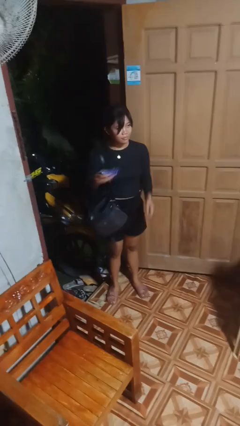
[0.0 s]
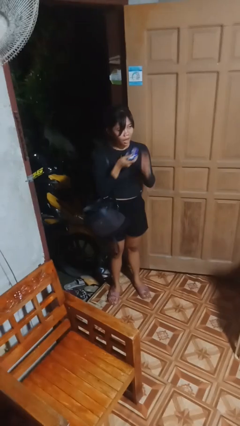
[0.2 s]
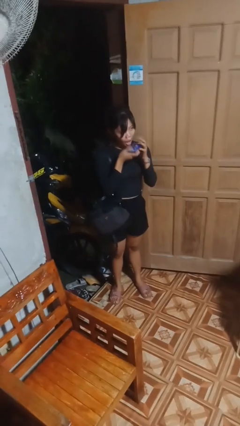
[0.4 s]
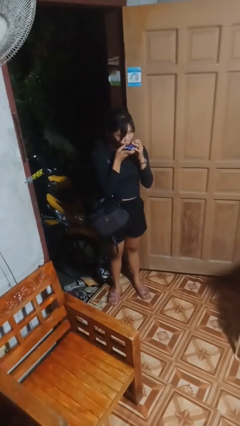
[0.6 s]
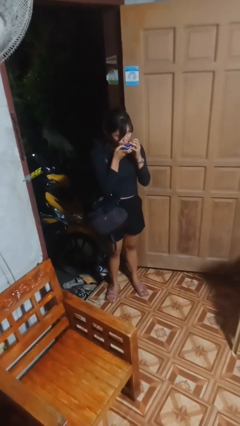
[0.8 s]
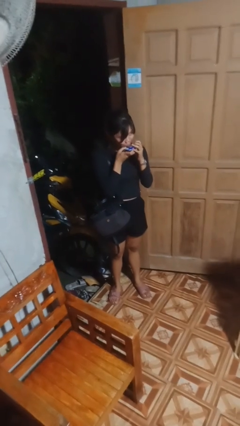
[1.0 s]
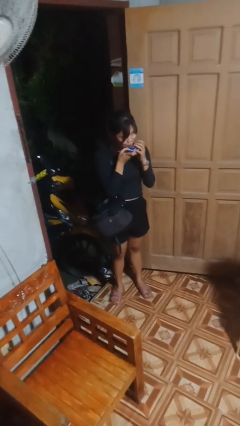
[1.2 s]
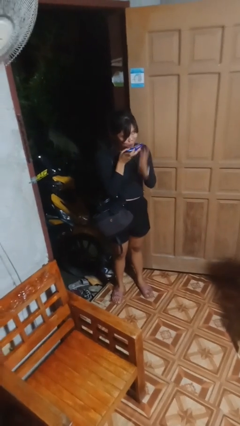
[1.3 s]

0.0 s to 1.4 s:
person eats snack from bag

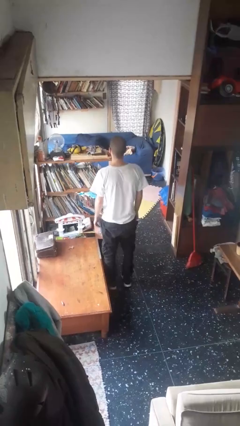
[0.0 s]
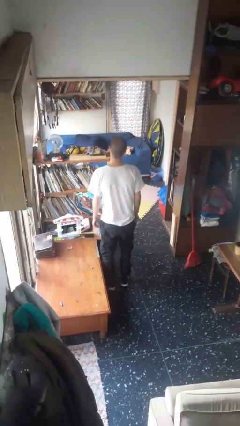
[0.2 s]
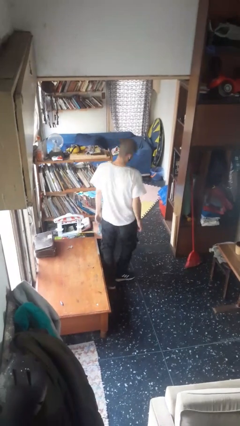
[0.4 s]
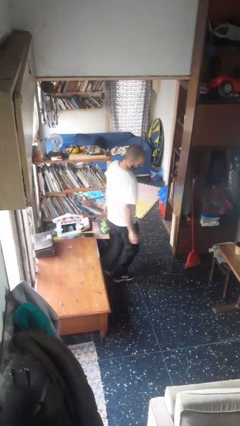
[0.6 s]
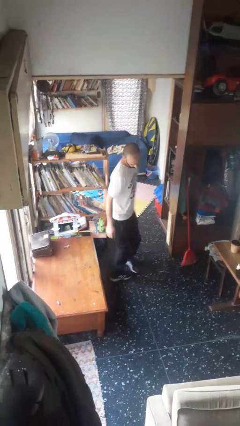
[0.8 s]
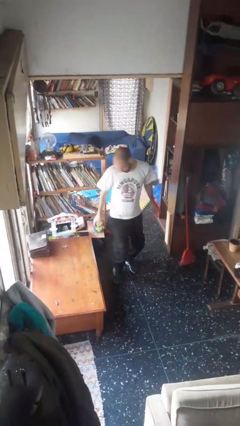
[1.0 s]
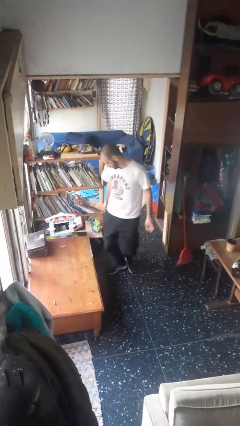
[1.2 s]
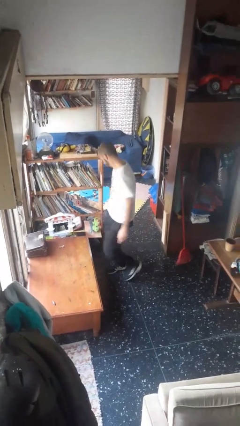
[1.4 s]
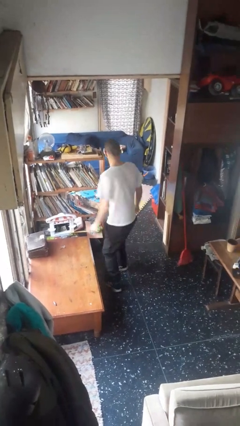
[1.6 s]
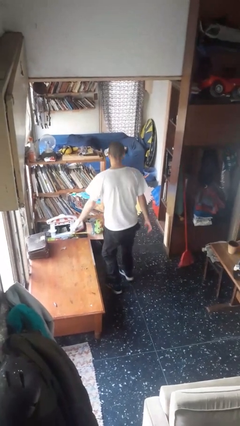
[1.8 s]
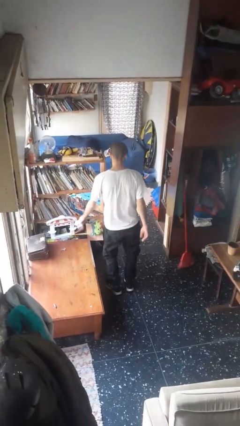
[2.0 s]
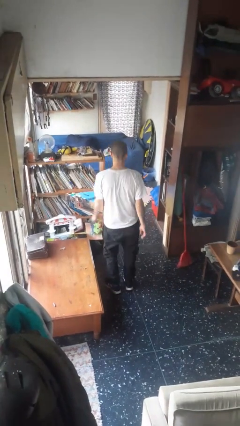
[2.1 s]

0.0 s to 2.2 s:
person twirls

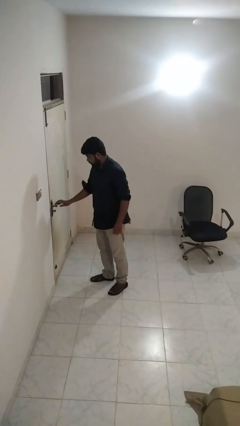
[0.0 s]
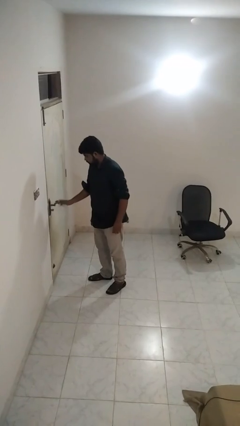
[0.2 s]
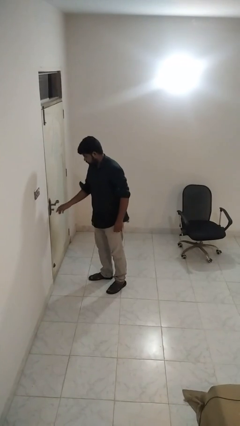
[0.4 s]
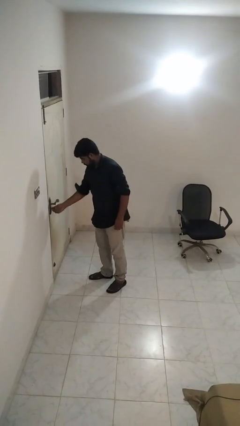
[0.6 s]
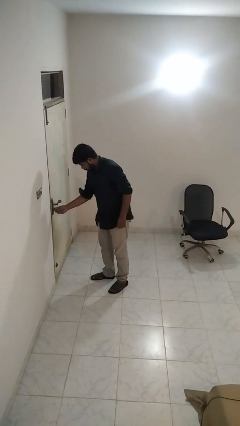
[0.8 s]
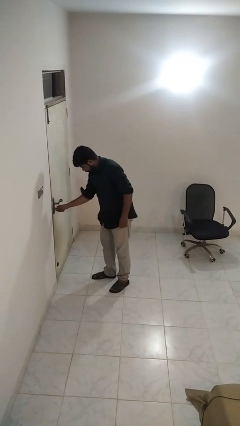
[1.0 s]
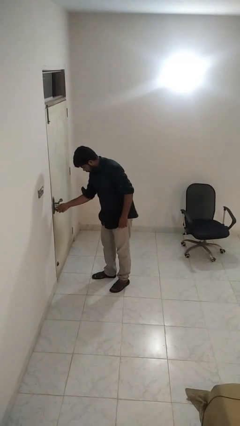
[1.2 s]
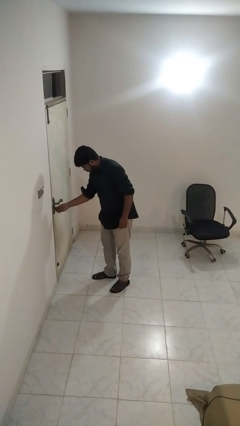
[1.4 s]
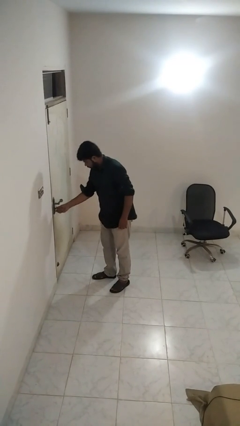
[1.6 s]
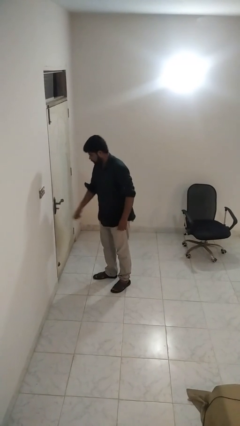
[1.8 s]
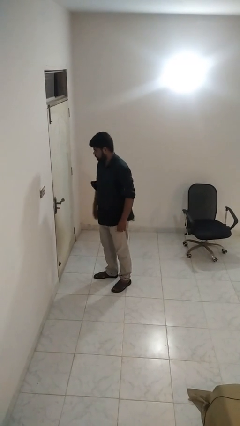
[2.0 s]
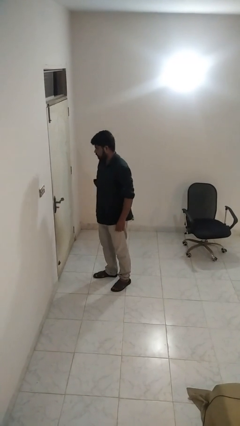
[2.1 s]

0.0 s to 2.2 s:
person locks door with keys

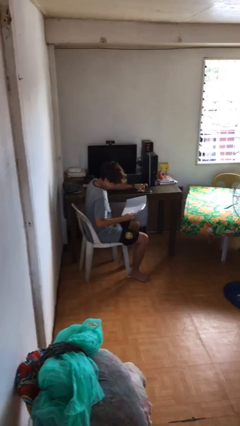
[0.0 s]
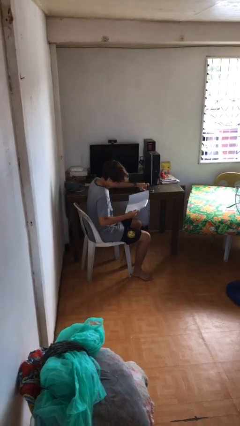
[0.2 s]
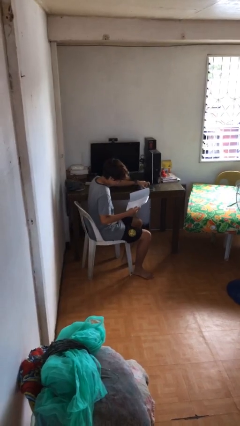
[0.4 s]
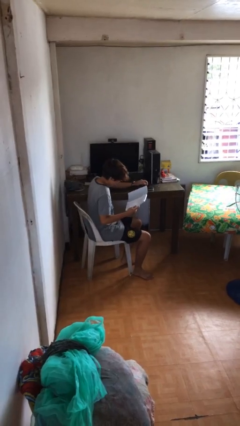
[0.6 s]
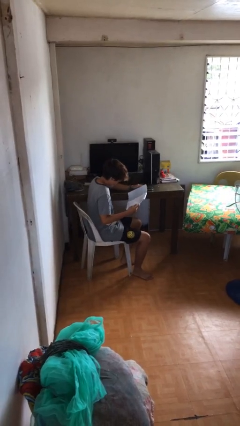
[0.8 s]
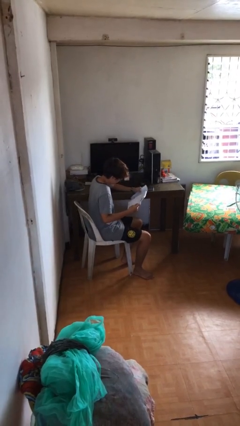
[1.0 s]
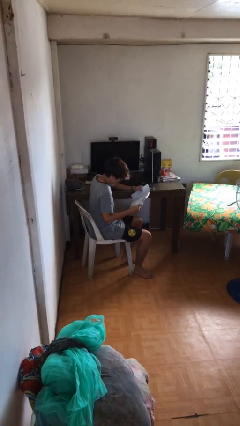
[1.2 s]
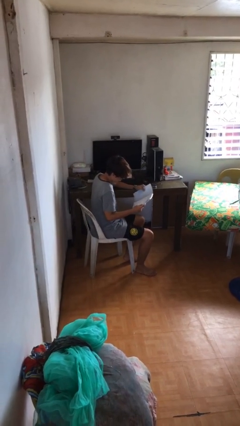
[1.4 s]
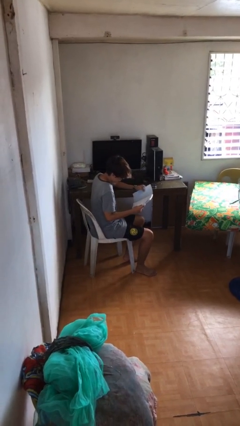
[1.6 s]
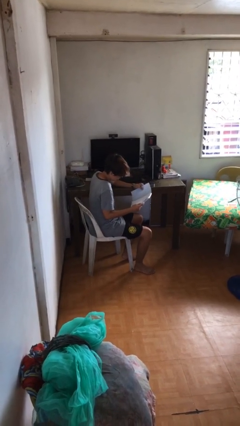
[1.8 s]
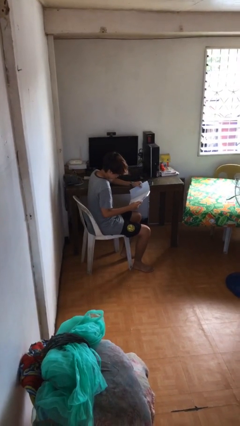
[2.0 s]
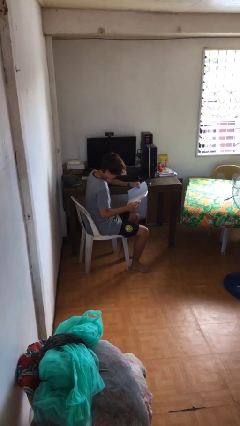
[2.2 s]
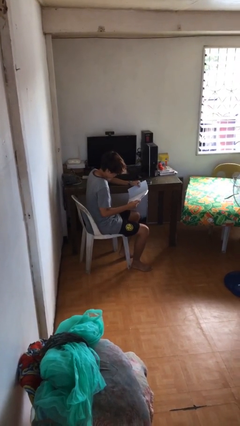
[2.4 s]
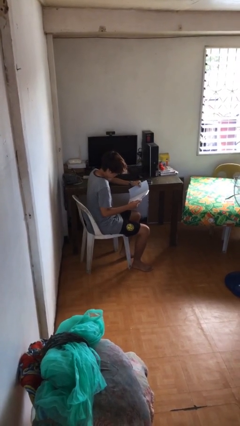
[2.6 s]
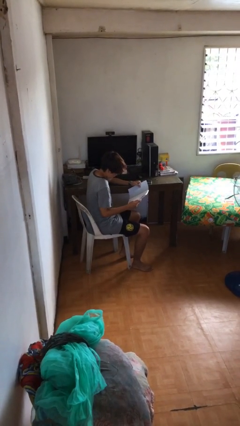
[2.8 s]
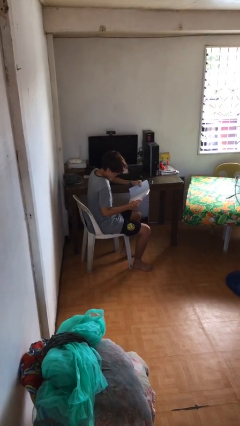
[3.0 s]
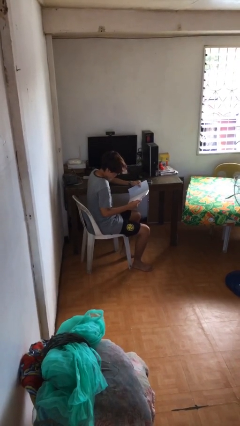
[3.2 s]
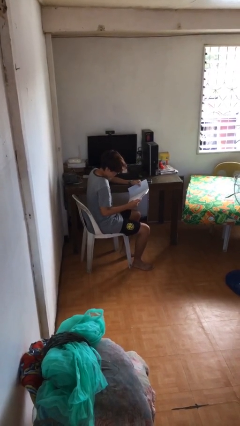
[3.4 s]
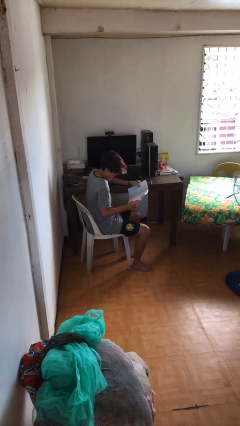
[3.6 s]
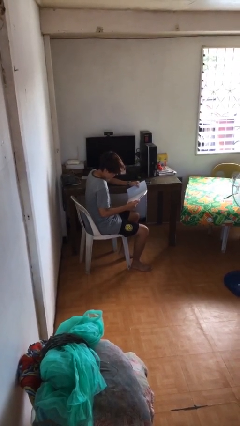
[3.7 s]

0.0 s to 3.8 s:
person reads document

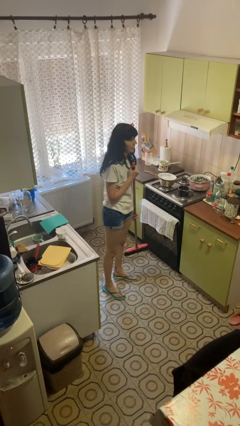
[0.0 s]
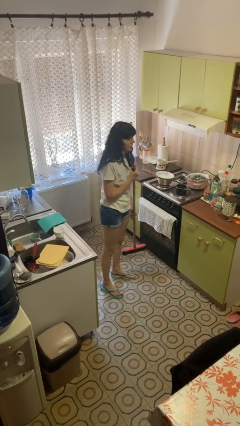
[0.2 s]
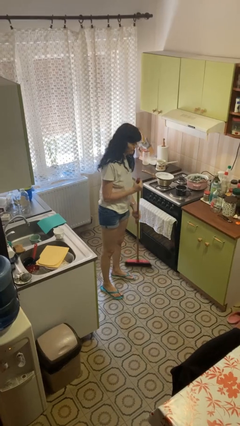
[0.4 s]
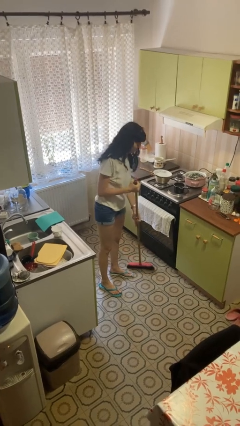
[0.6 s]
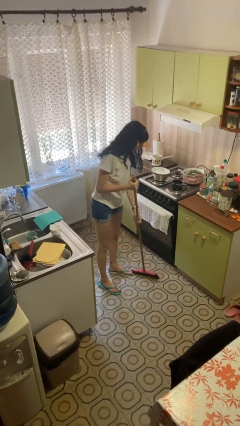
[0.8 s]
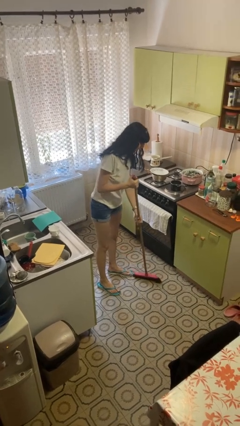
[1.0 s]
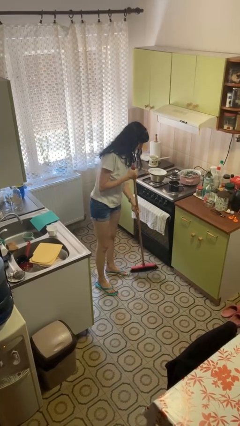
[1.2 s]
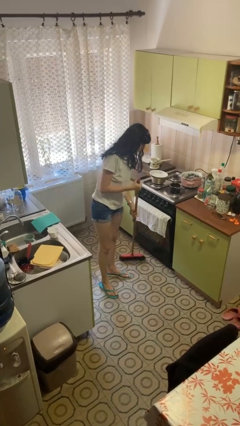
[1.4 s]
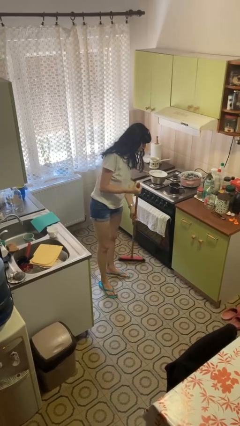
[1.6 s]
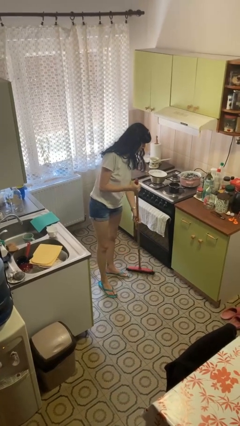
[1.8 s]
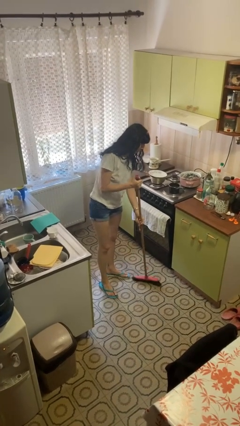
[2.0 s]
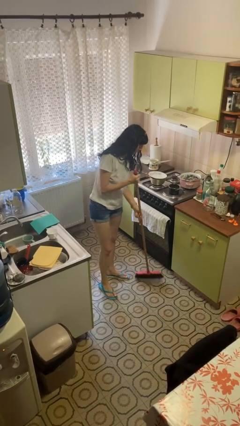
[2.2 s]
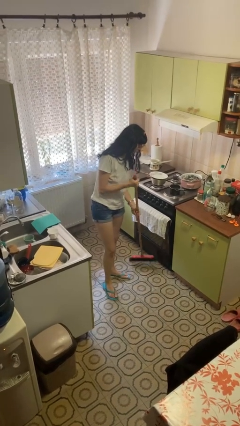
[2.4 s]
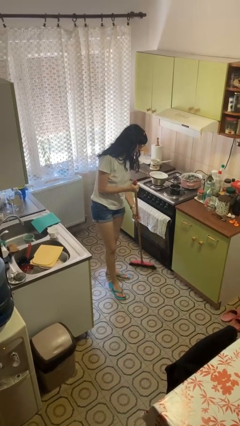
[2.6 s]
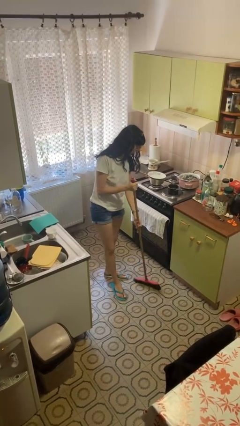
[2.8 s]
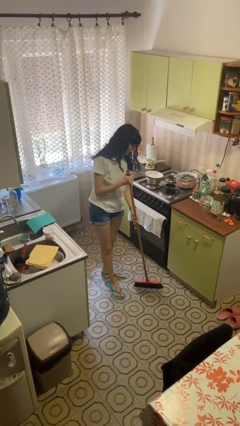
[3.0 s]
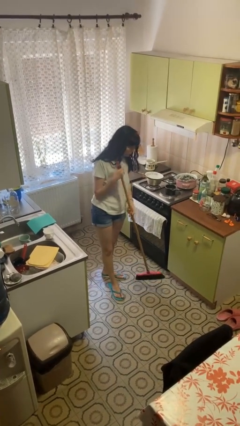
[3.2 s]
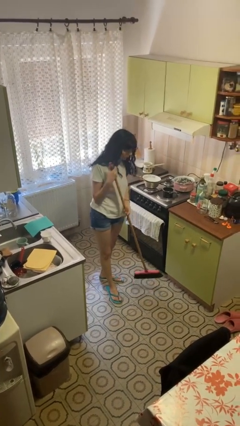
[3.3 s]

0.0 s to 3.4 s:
person sweeps floor

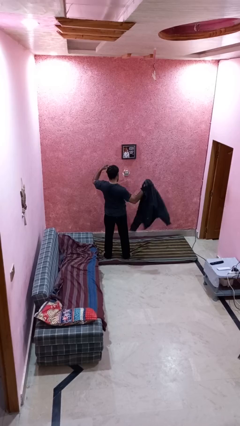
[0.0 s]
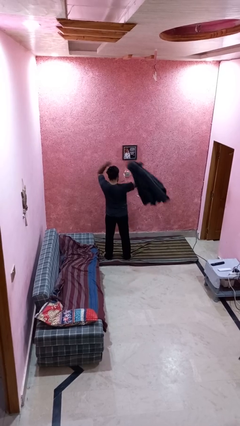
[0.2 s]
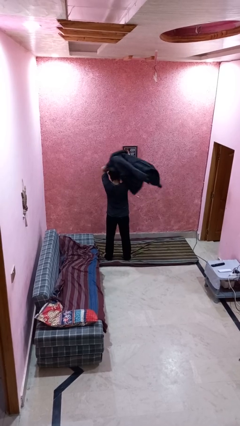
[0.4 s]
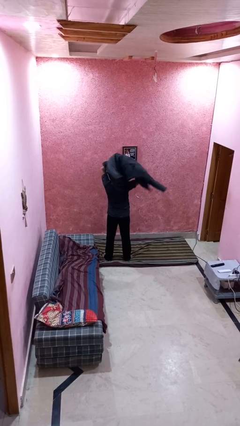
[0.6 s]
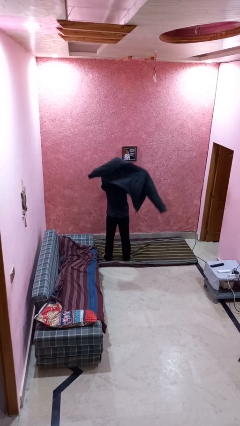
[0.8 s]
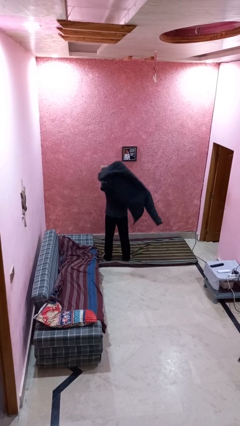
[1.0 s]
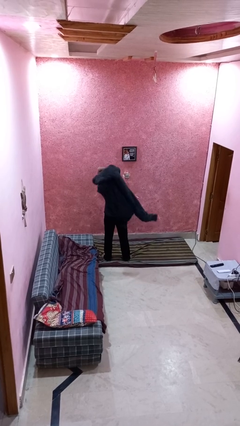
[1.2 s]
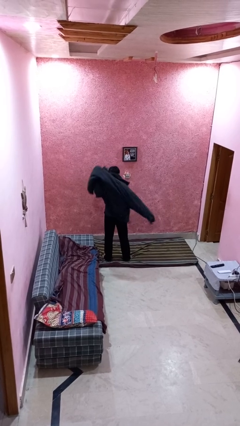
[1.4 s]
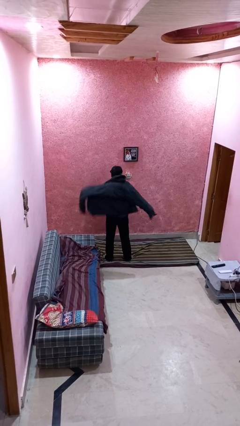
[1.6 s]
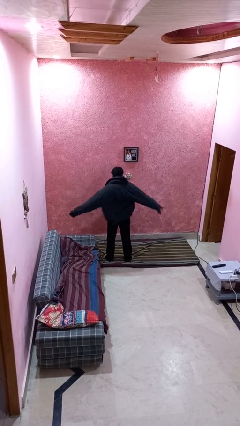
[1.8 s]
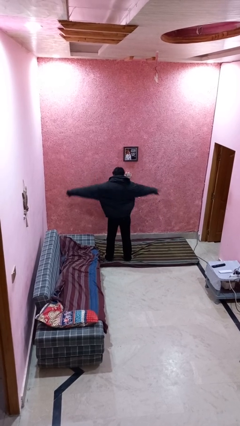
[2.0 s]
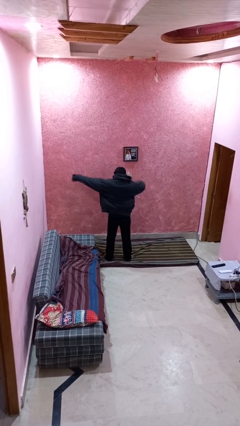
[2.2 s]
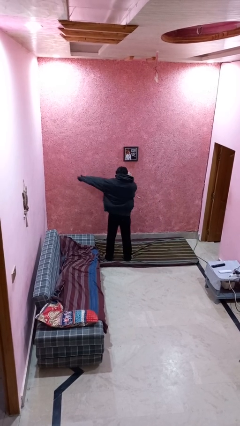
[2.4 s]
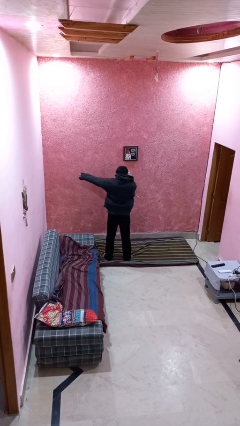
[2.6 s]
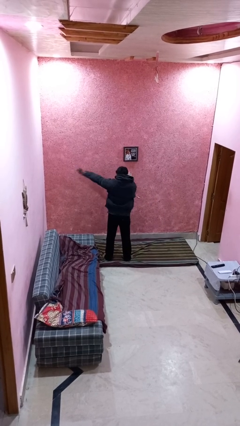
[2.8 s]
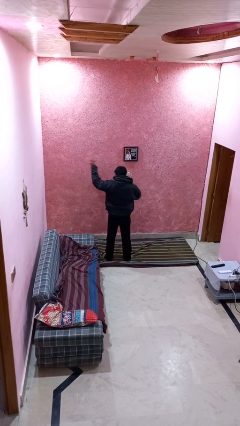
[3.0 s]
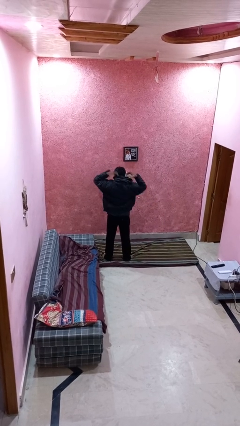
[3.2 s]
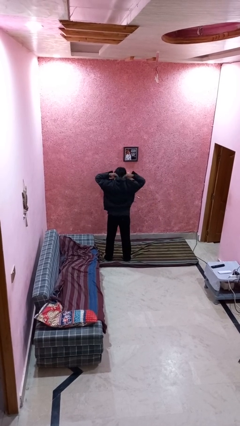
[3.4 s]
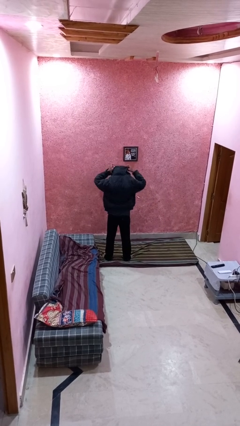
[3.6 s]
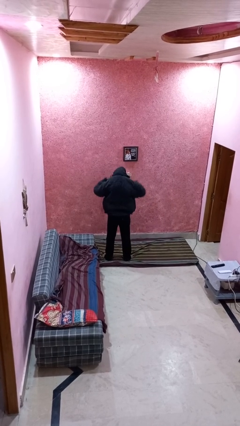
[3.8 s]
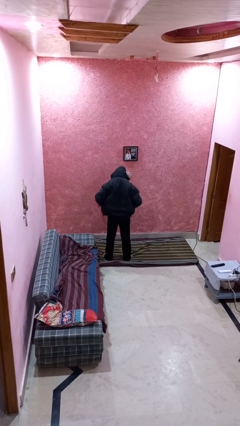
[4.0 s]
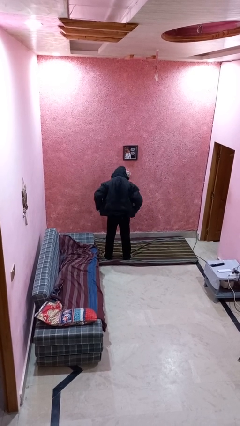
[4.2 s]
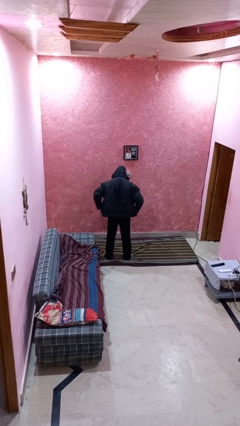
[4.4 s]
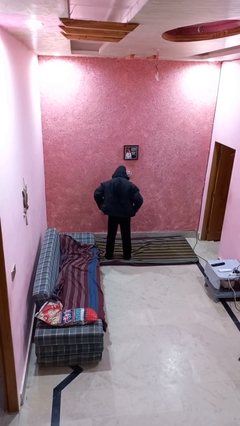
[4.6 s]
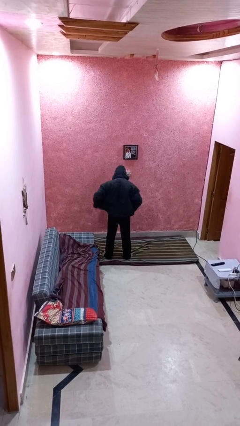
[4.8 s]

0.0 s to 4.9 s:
person puts on hoodie
